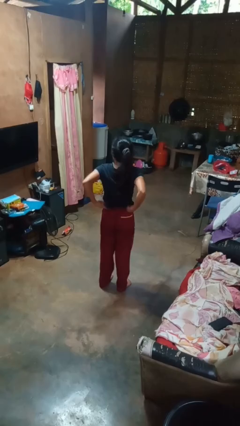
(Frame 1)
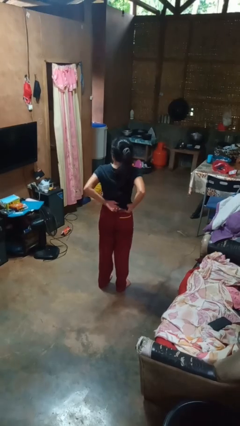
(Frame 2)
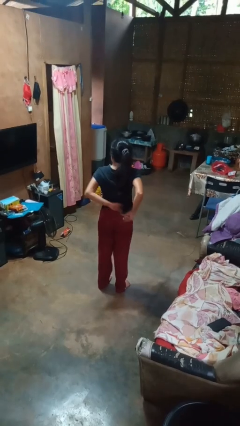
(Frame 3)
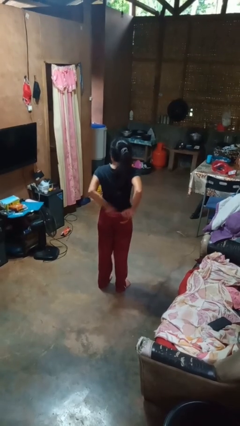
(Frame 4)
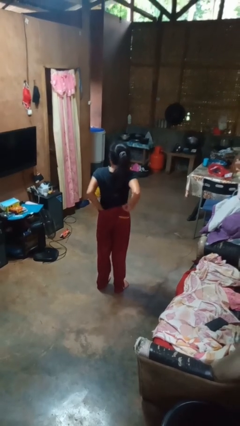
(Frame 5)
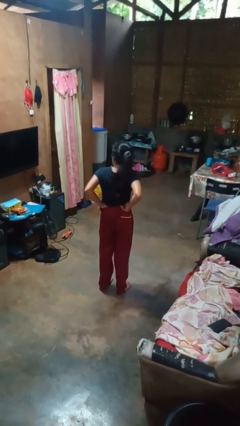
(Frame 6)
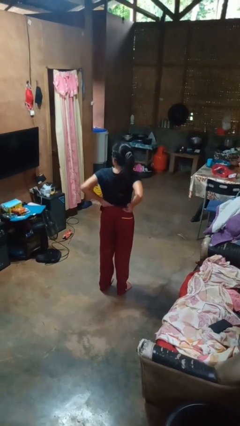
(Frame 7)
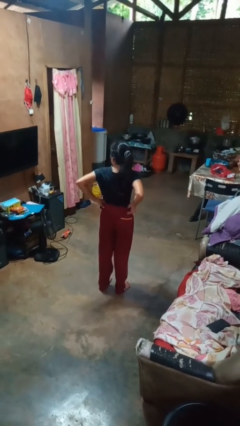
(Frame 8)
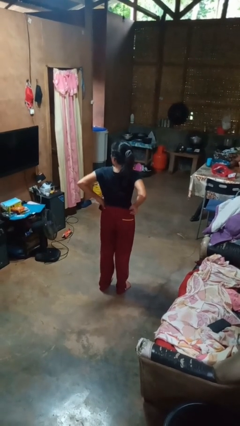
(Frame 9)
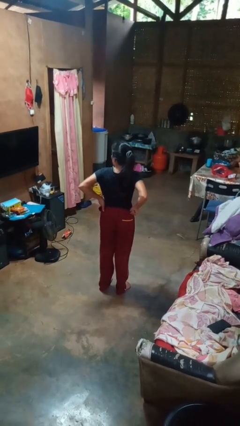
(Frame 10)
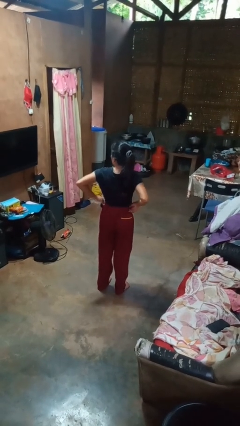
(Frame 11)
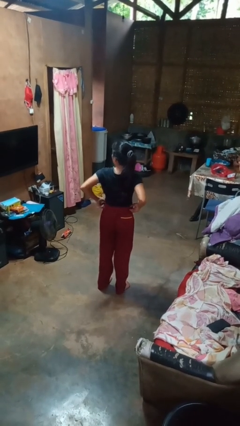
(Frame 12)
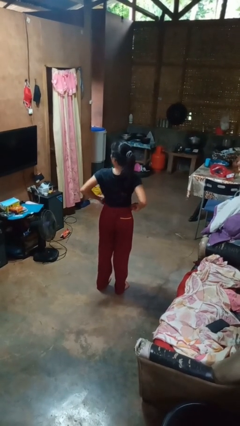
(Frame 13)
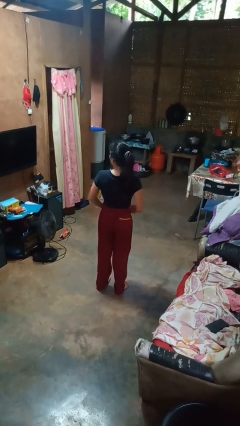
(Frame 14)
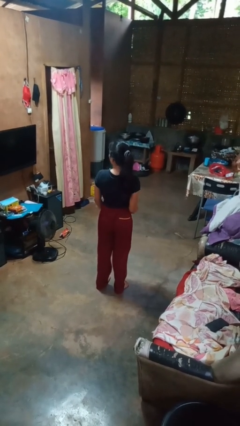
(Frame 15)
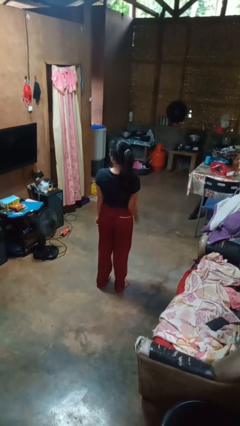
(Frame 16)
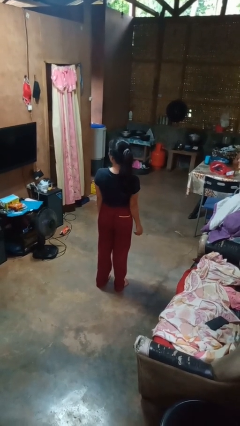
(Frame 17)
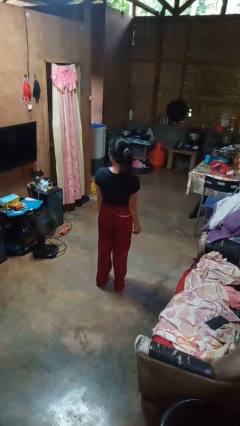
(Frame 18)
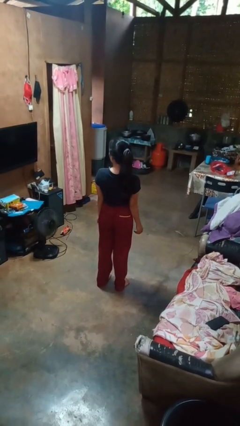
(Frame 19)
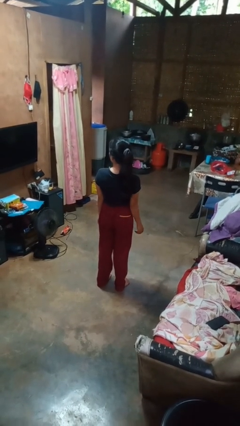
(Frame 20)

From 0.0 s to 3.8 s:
person tucks in shirt

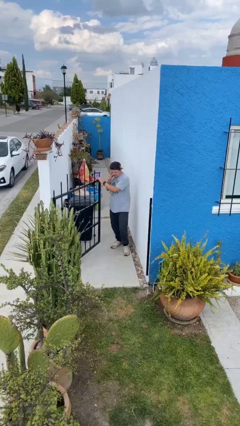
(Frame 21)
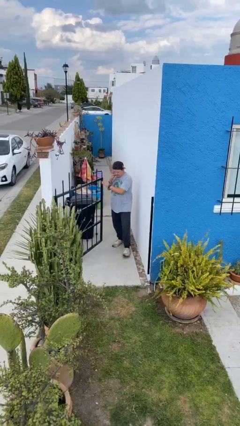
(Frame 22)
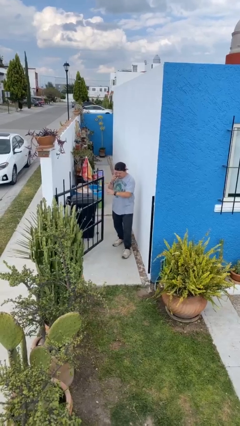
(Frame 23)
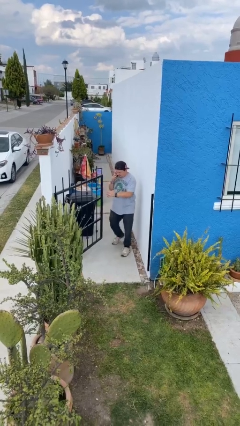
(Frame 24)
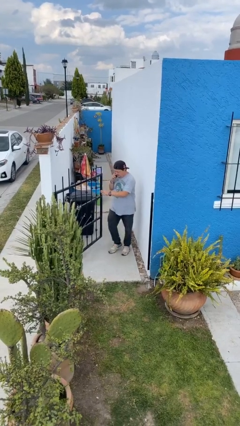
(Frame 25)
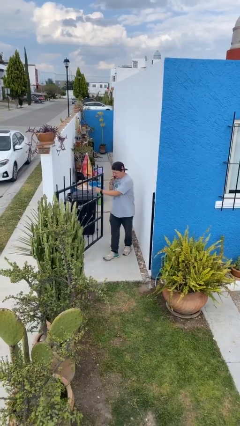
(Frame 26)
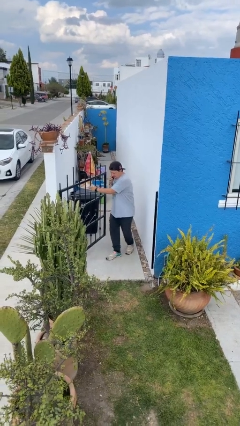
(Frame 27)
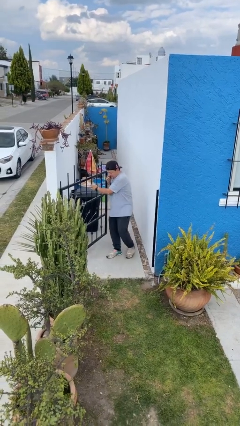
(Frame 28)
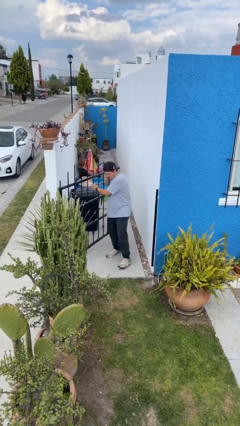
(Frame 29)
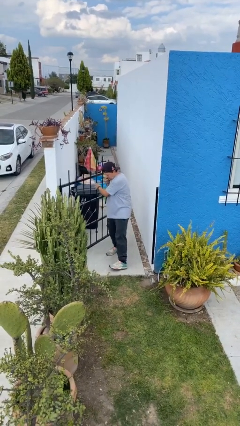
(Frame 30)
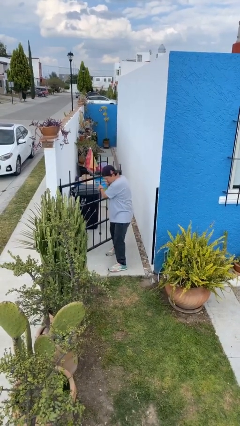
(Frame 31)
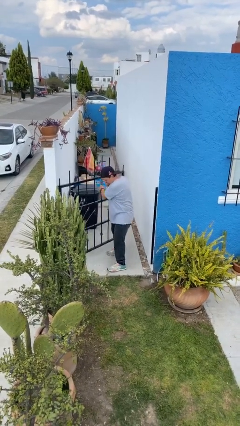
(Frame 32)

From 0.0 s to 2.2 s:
person enters scene through structure

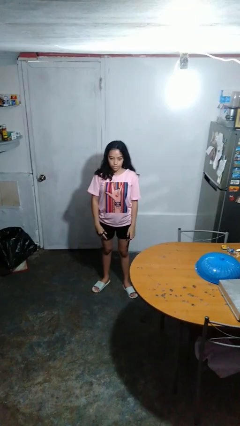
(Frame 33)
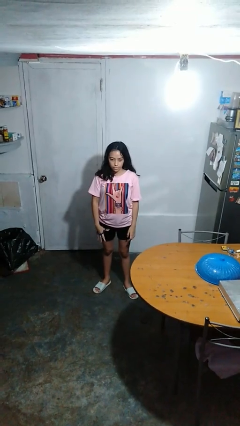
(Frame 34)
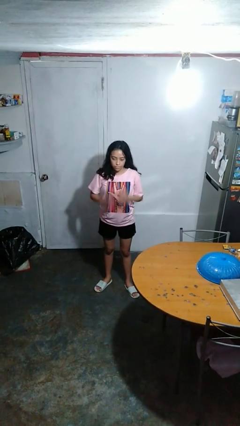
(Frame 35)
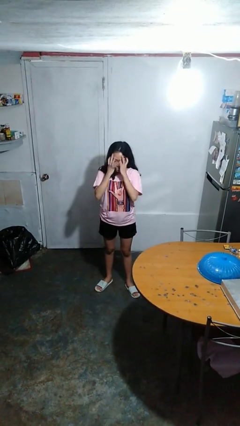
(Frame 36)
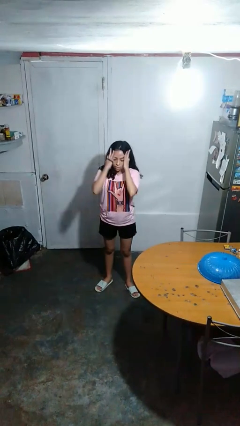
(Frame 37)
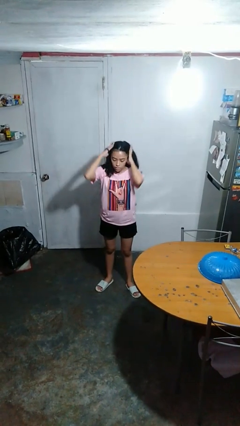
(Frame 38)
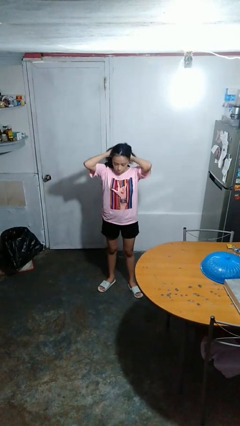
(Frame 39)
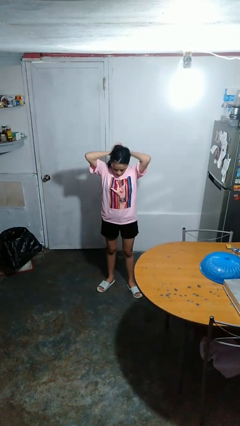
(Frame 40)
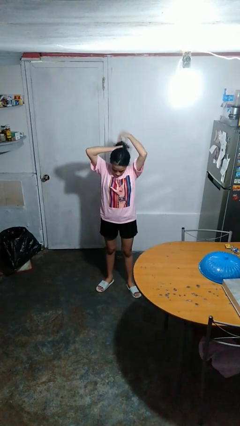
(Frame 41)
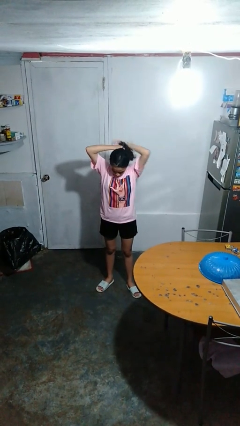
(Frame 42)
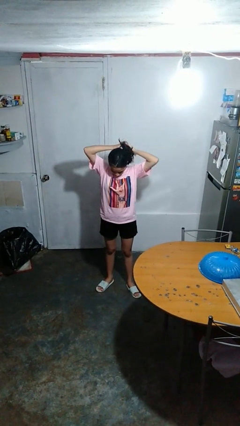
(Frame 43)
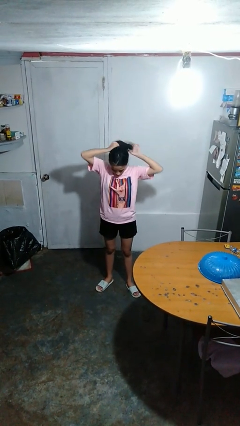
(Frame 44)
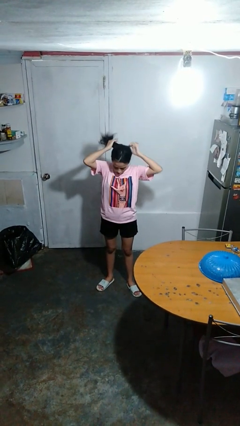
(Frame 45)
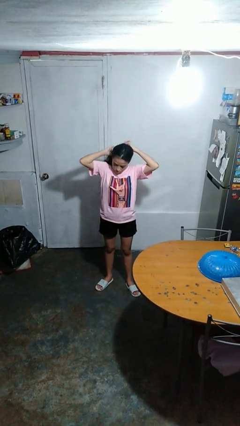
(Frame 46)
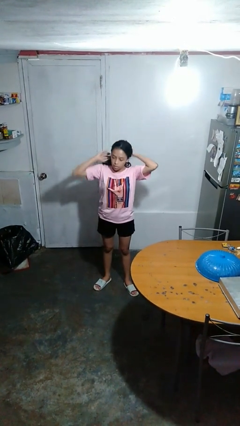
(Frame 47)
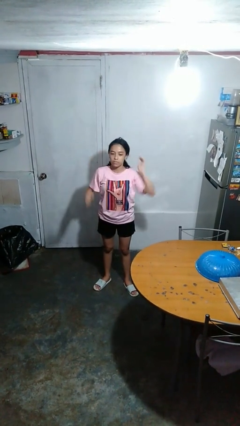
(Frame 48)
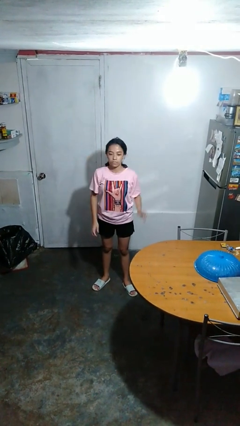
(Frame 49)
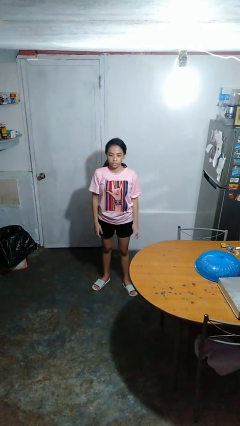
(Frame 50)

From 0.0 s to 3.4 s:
person puts hair in ponytail

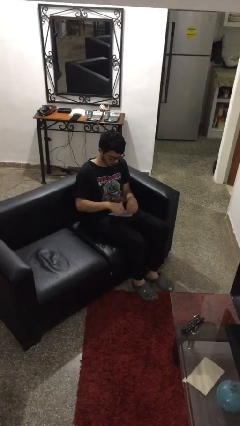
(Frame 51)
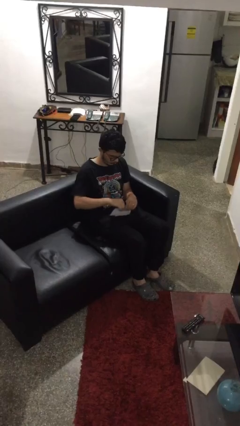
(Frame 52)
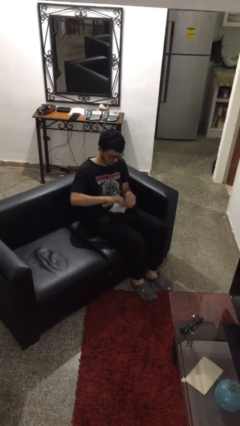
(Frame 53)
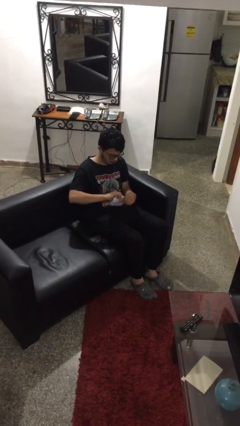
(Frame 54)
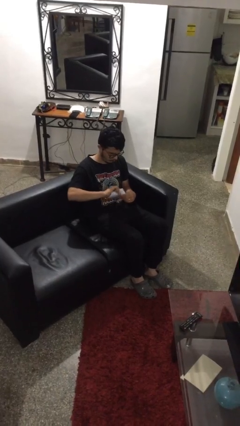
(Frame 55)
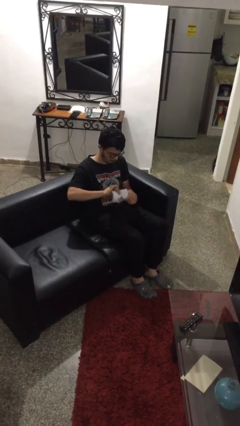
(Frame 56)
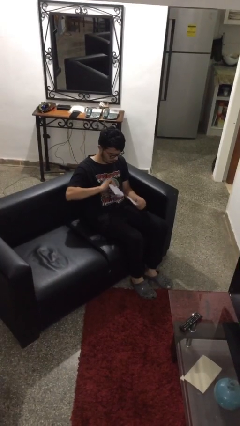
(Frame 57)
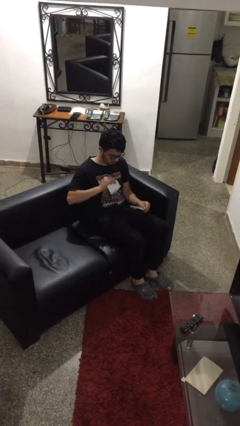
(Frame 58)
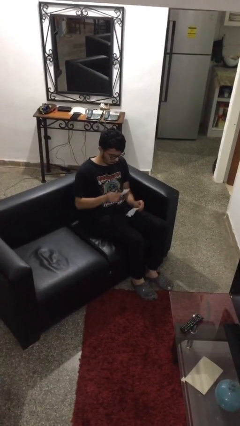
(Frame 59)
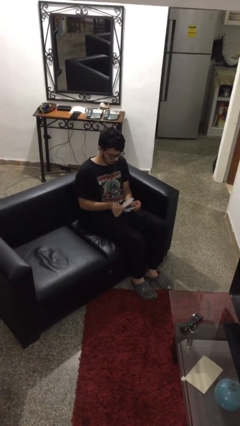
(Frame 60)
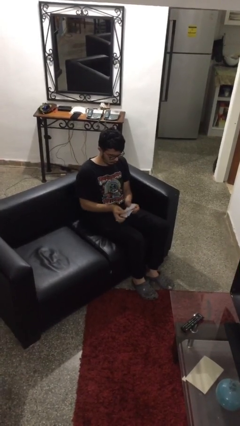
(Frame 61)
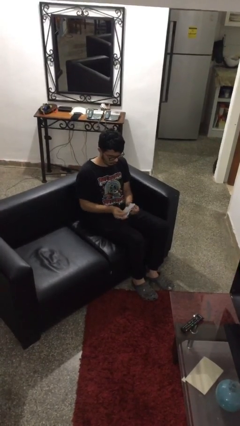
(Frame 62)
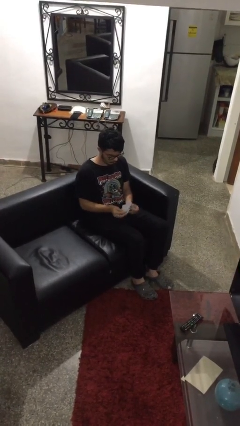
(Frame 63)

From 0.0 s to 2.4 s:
person tears paper

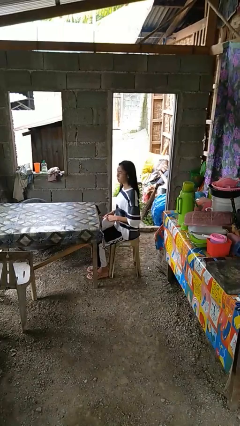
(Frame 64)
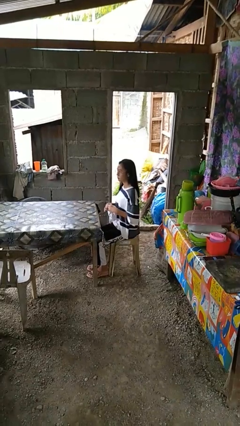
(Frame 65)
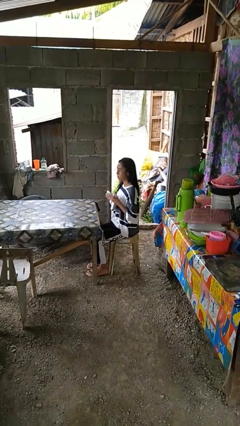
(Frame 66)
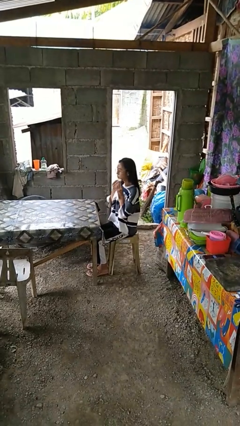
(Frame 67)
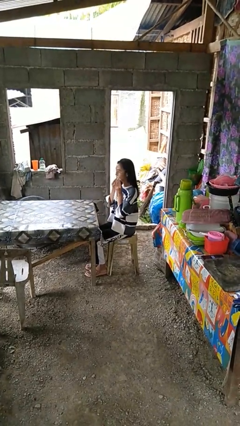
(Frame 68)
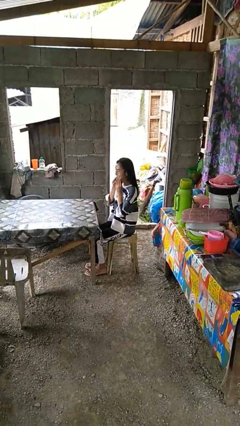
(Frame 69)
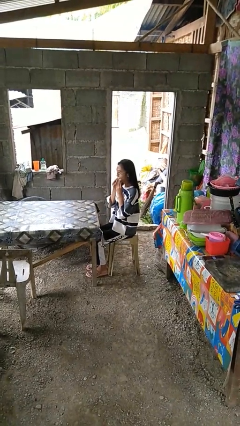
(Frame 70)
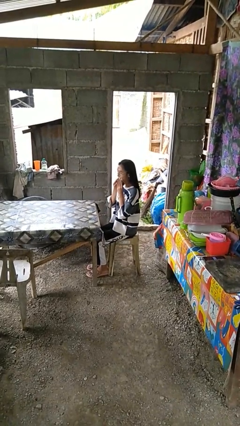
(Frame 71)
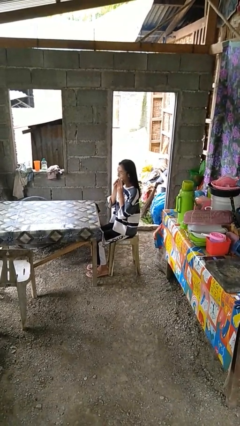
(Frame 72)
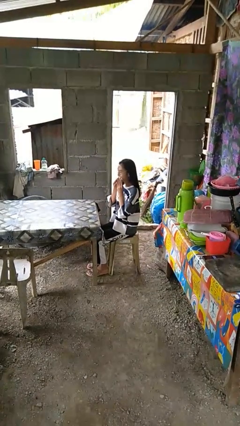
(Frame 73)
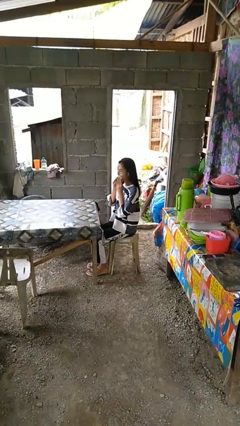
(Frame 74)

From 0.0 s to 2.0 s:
person wipes mouth with napkin

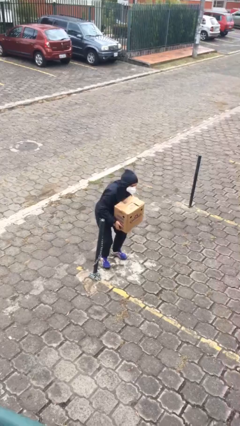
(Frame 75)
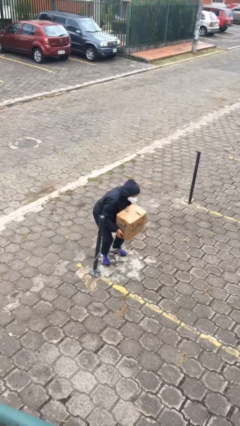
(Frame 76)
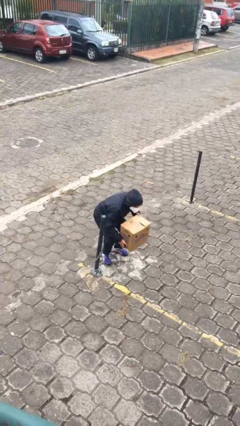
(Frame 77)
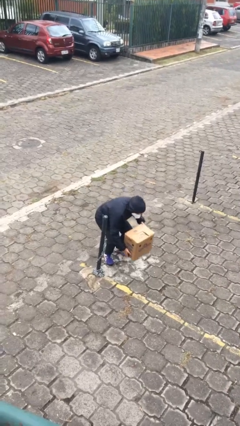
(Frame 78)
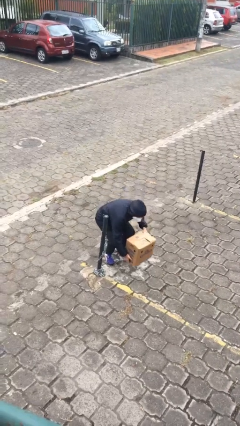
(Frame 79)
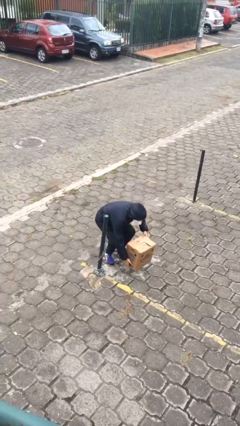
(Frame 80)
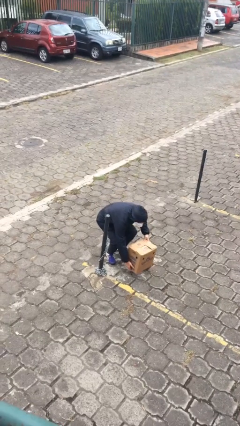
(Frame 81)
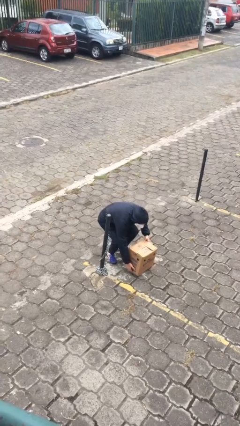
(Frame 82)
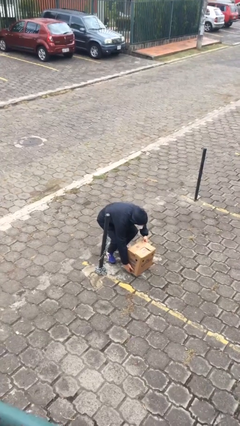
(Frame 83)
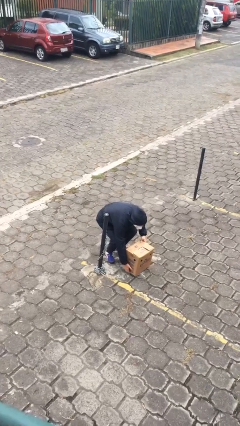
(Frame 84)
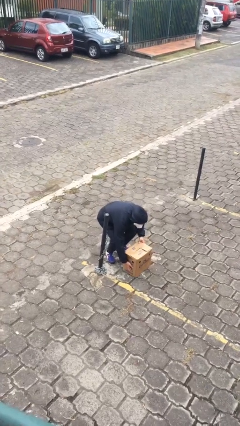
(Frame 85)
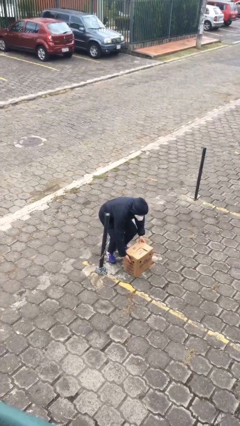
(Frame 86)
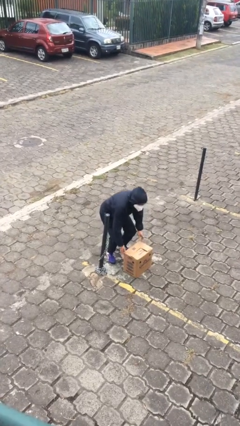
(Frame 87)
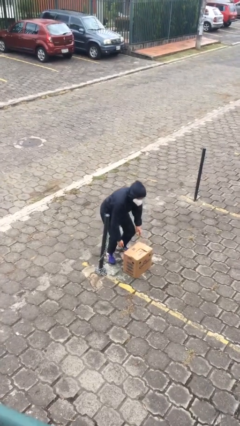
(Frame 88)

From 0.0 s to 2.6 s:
person puts down object on floor

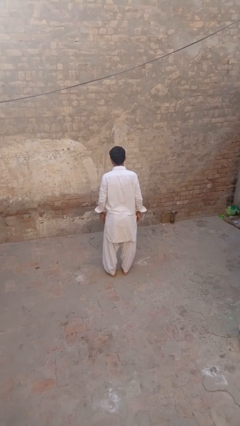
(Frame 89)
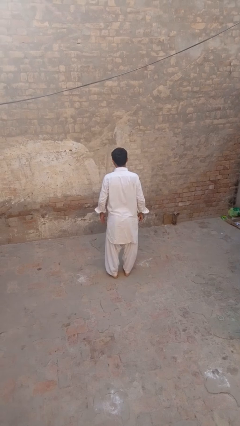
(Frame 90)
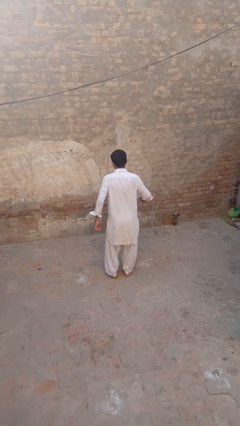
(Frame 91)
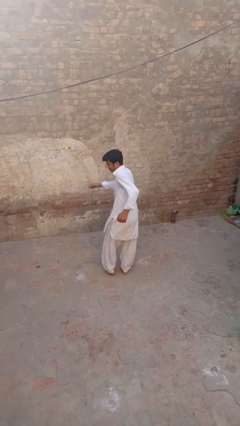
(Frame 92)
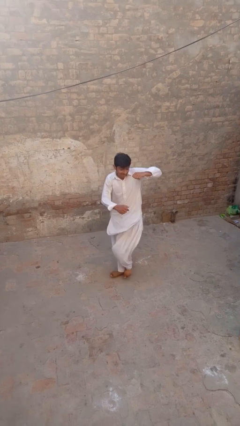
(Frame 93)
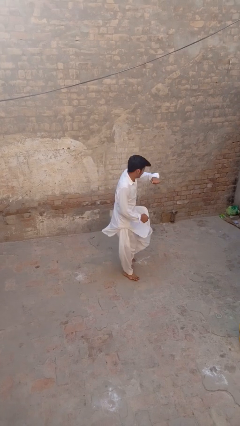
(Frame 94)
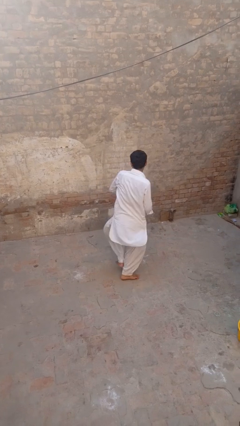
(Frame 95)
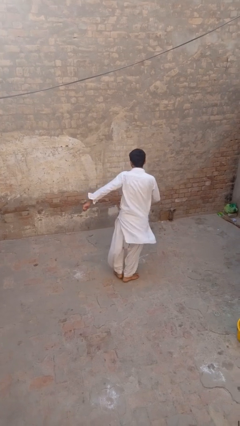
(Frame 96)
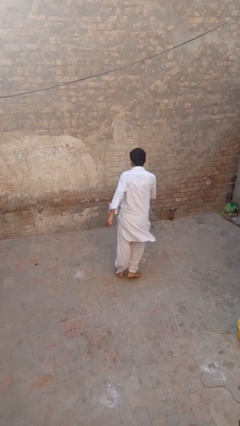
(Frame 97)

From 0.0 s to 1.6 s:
person twirls
